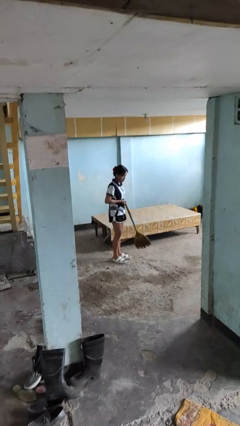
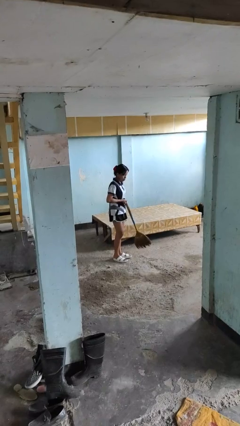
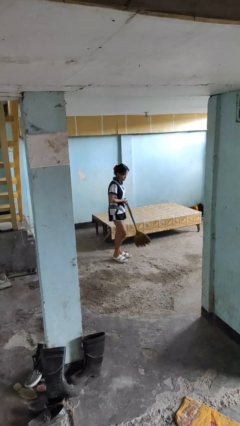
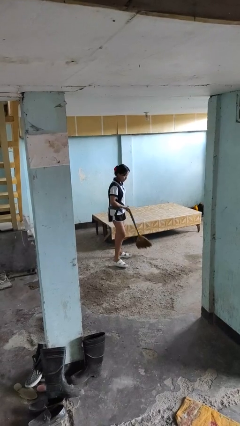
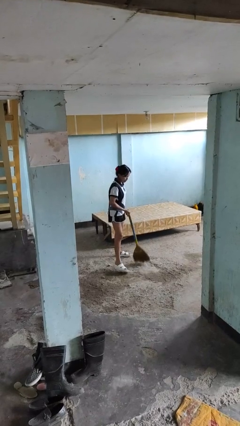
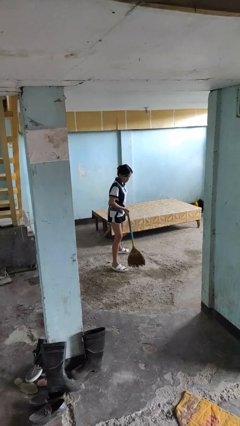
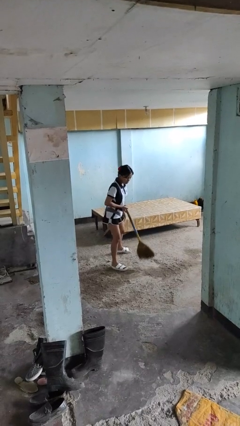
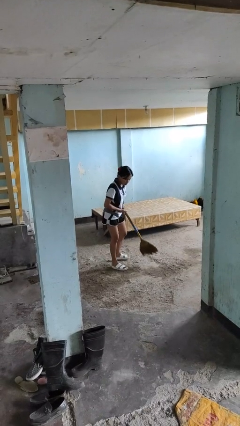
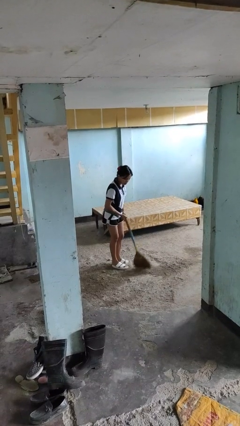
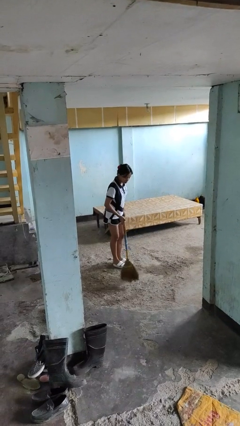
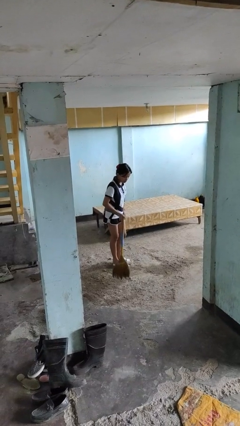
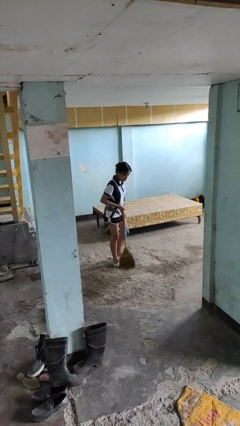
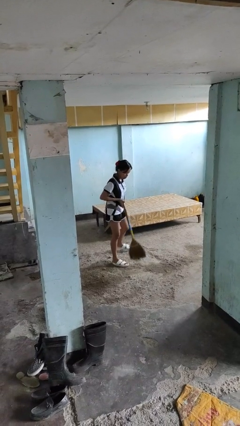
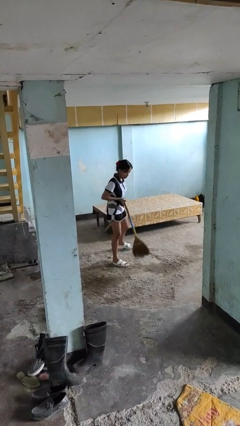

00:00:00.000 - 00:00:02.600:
person sweeps floor

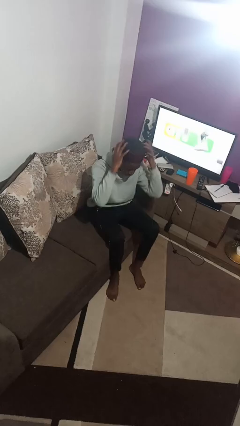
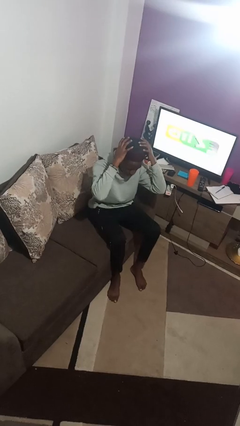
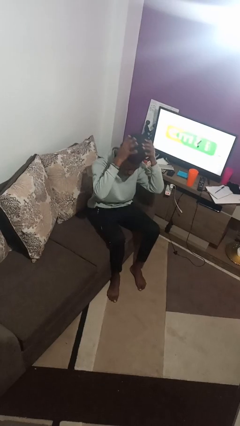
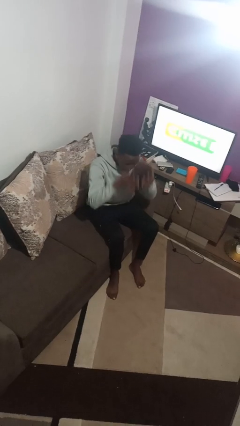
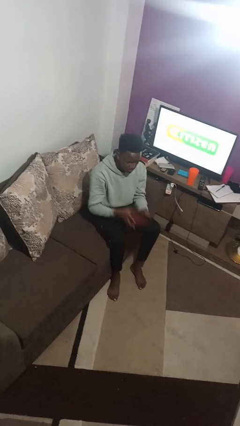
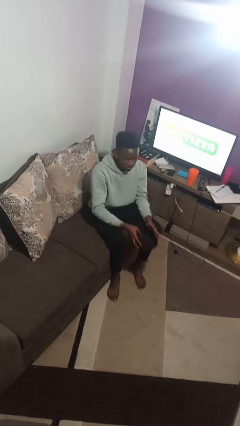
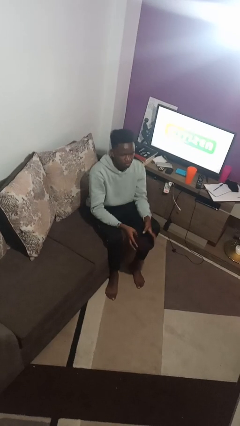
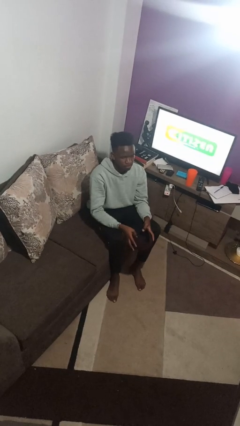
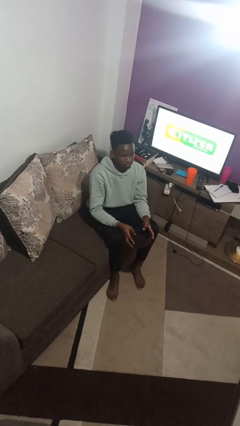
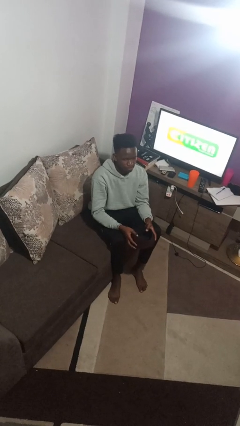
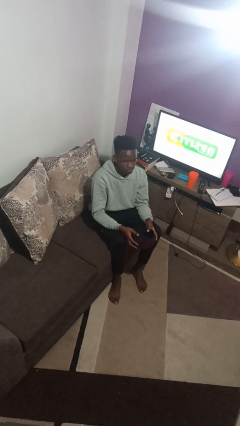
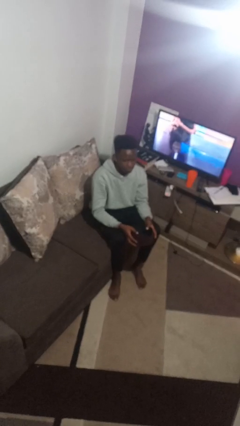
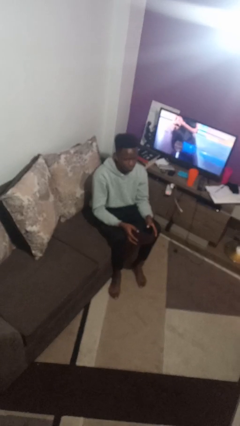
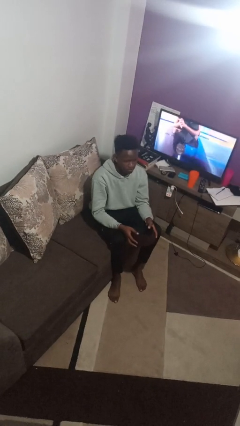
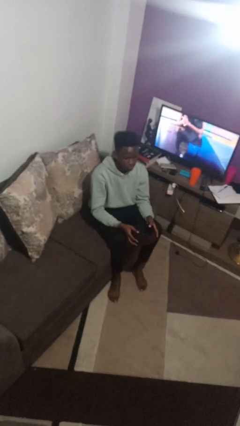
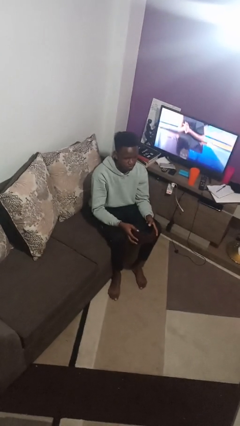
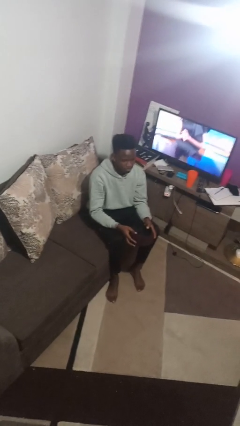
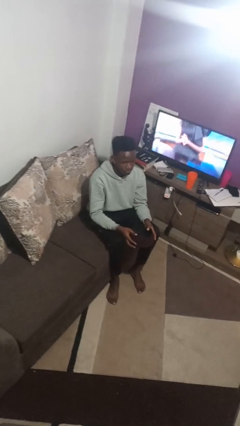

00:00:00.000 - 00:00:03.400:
person takes off hat

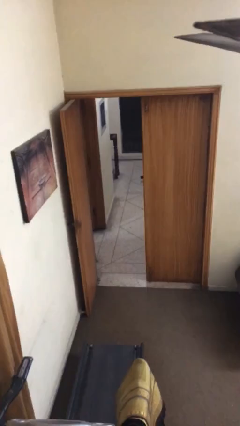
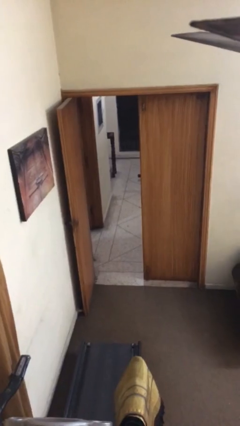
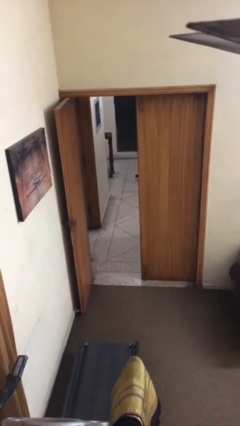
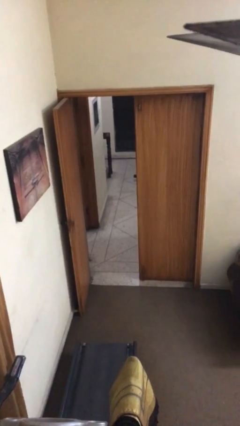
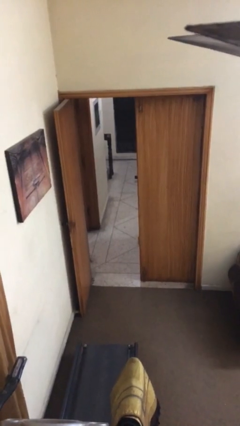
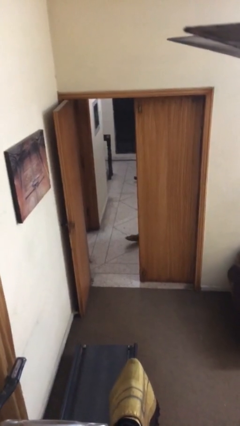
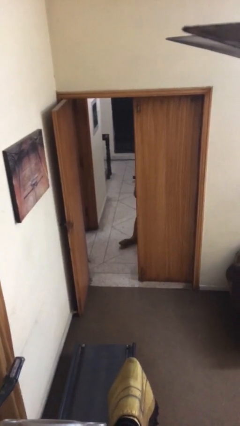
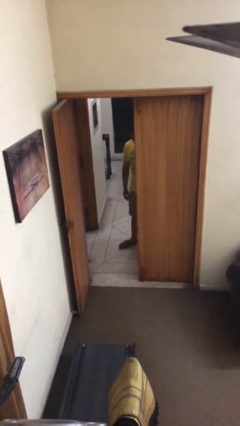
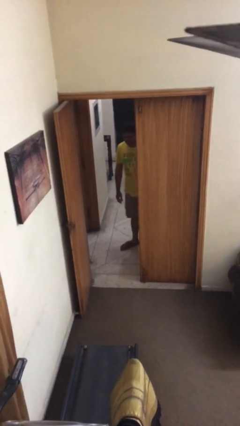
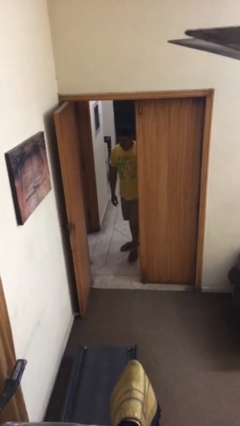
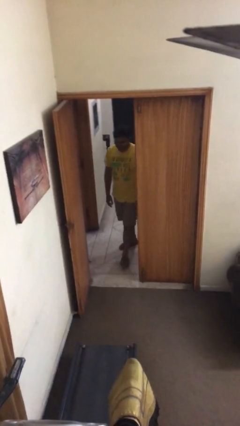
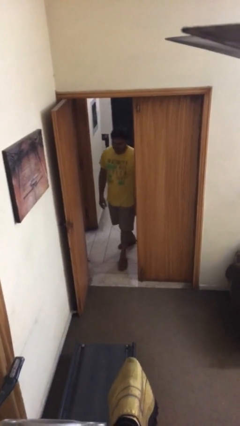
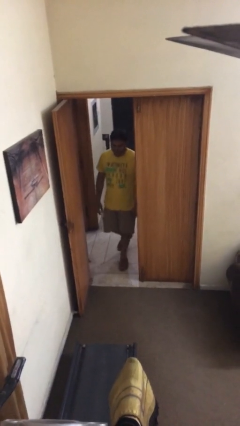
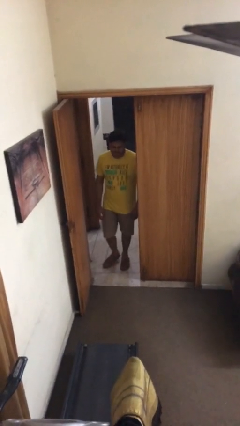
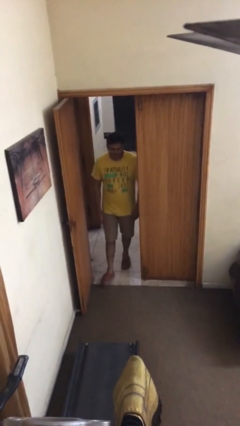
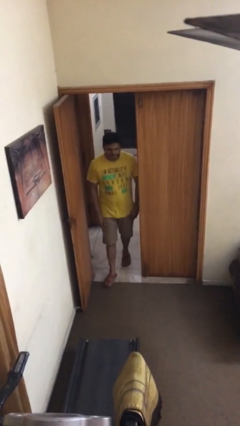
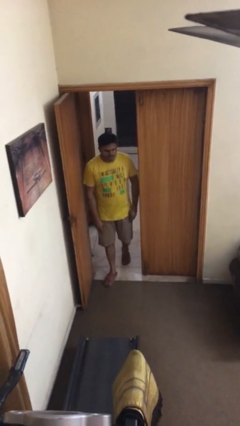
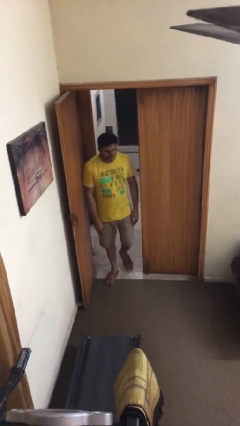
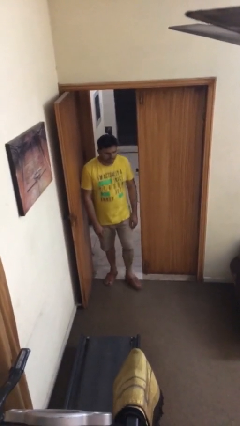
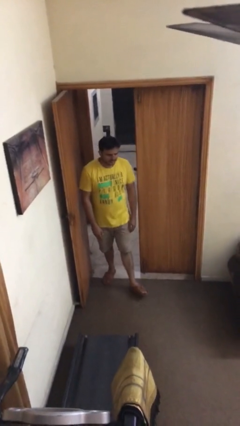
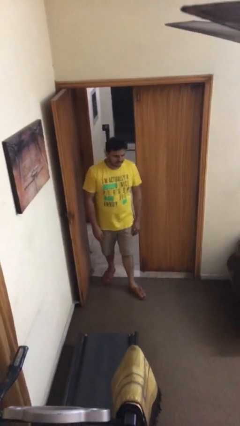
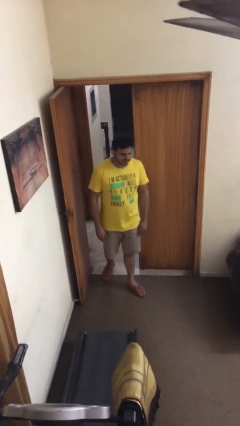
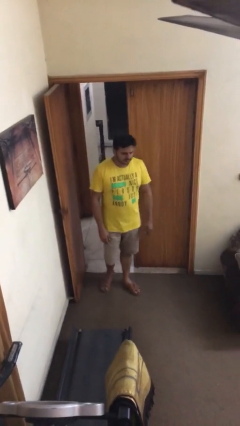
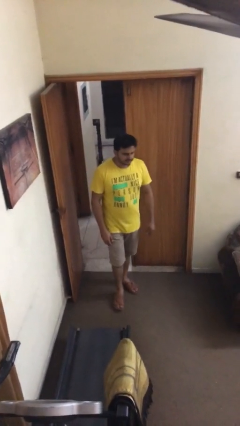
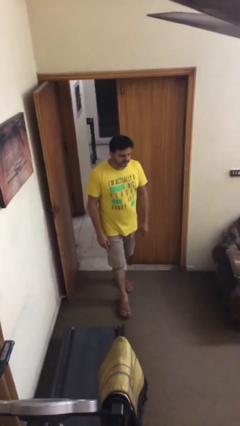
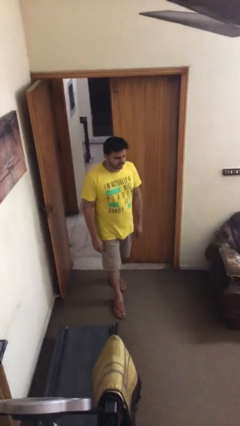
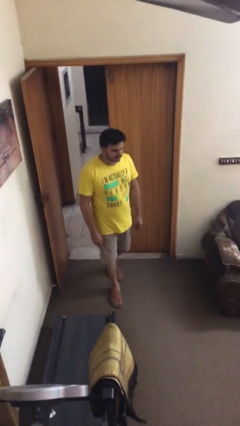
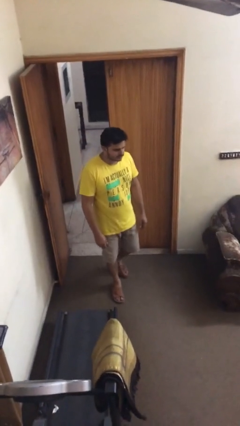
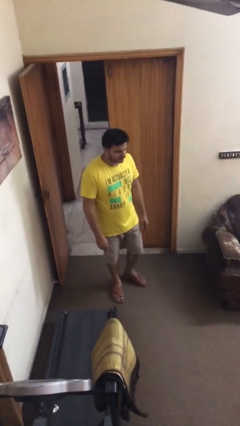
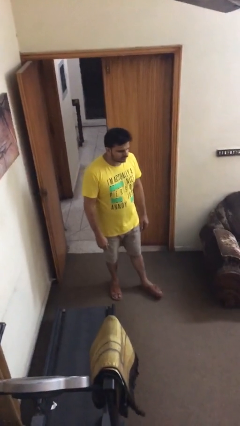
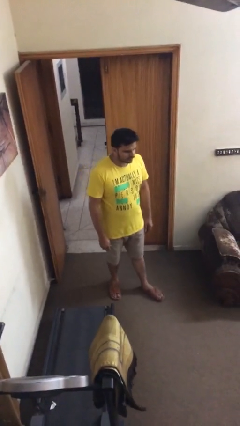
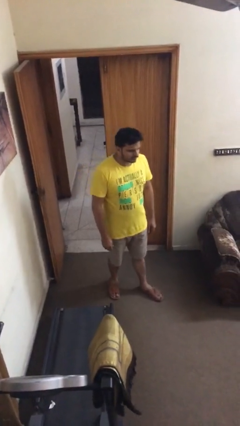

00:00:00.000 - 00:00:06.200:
person enters scene through structure

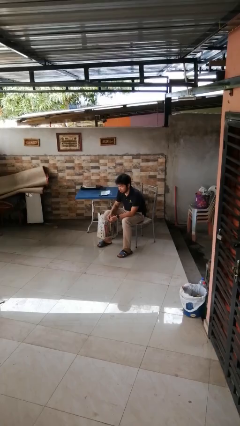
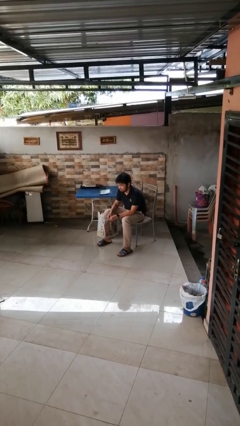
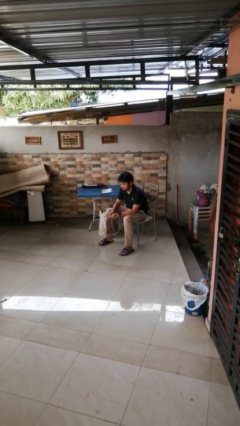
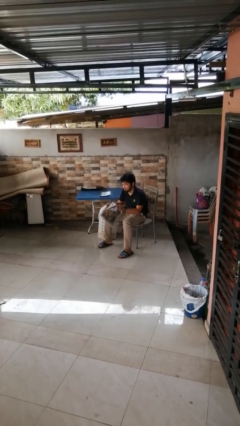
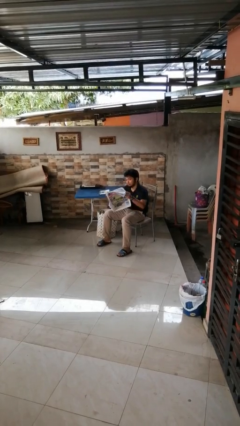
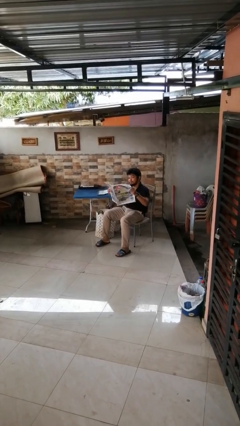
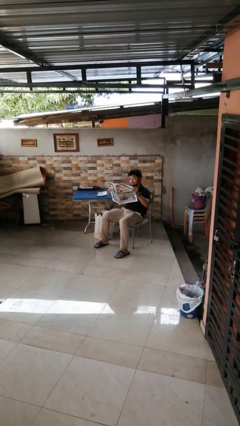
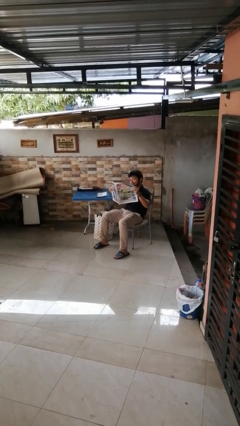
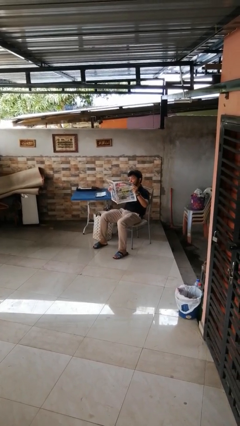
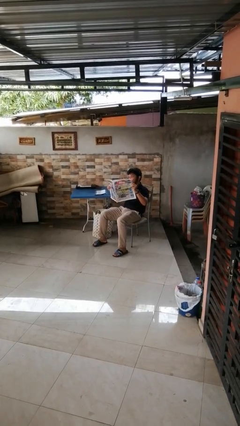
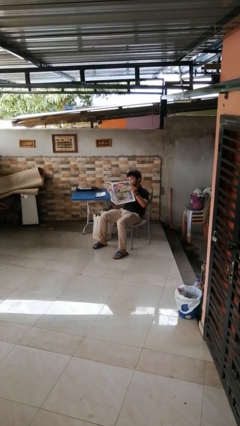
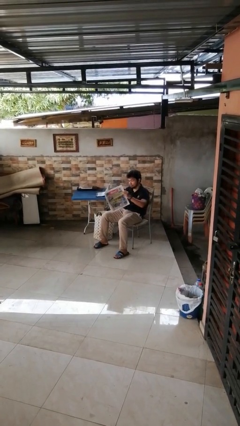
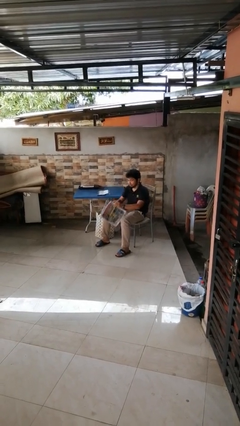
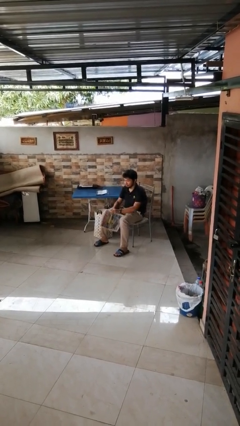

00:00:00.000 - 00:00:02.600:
person reads newspaper

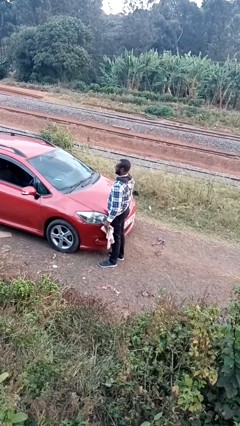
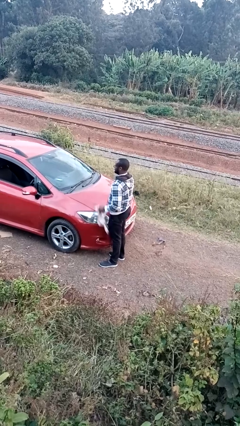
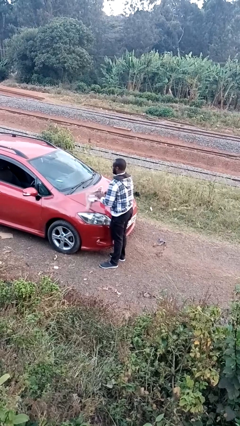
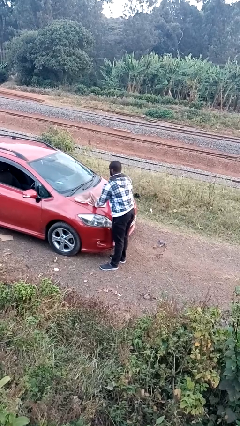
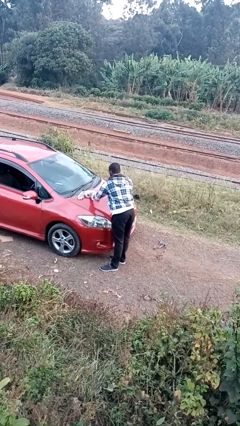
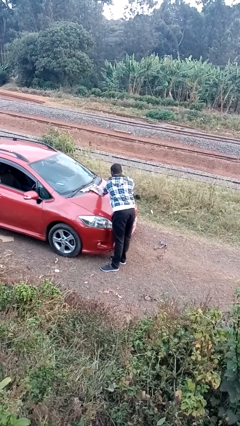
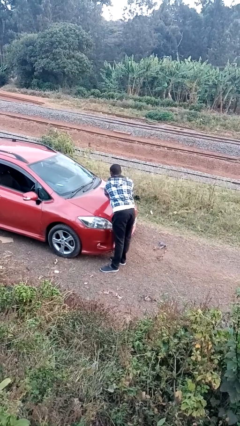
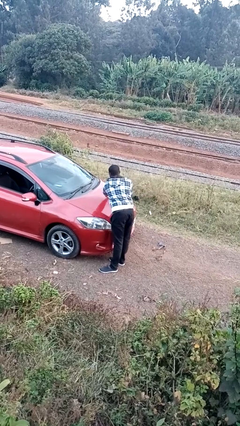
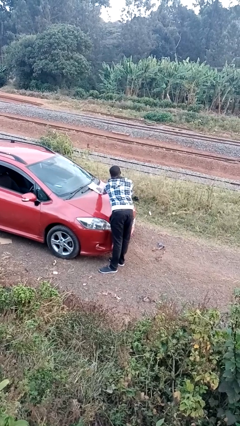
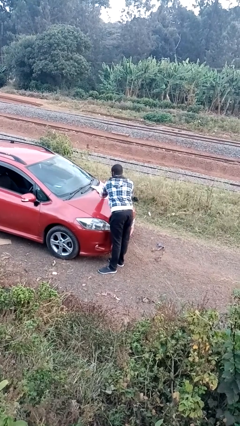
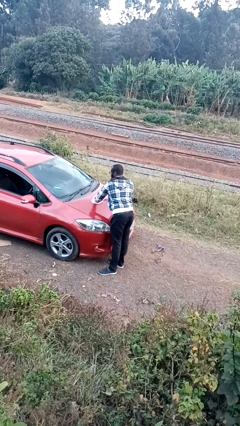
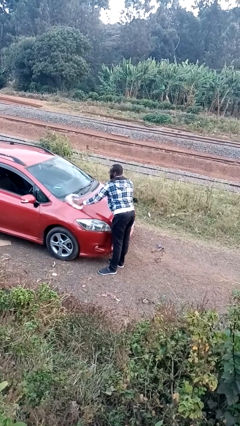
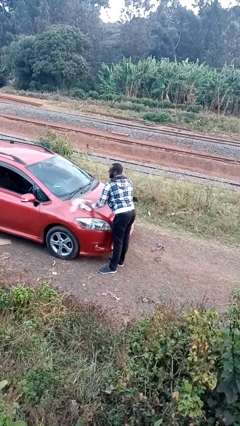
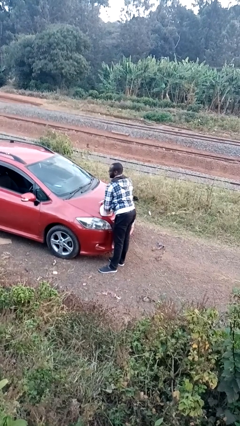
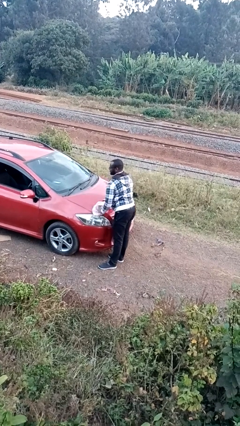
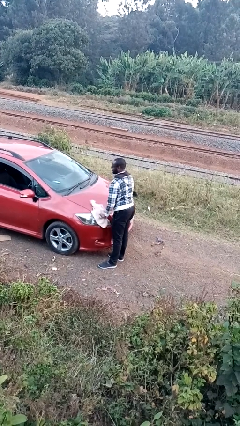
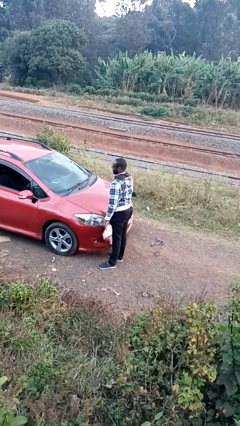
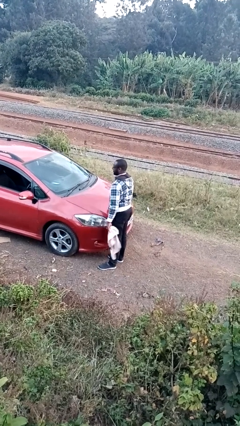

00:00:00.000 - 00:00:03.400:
person polishes car with rag
